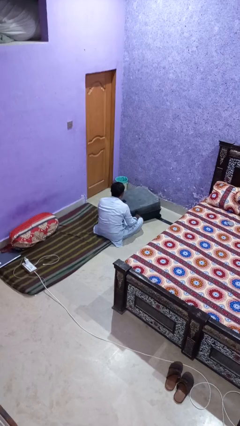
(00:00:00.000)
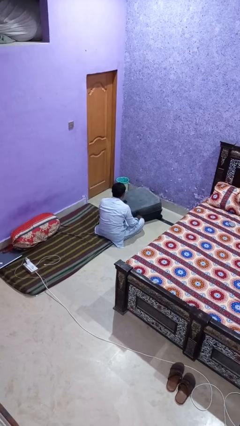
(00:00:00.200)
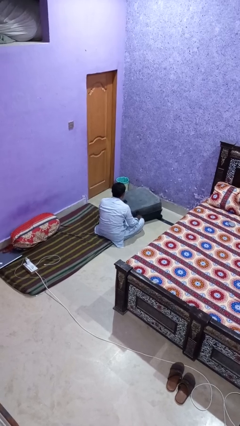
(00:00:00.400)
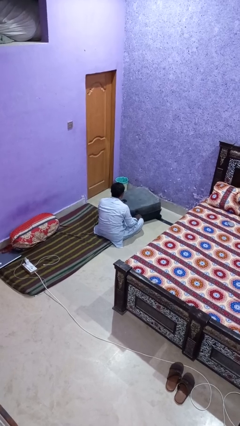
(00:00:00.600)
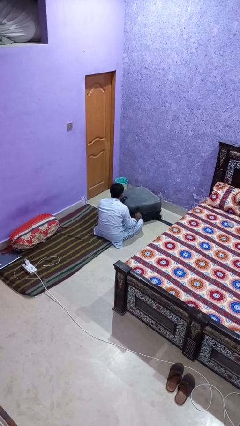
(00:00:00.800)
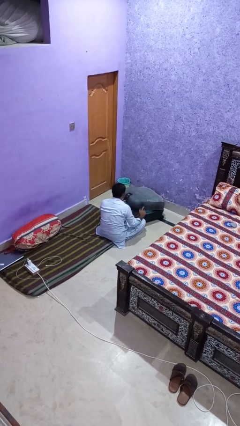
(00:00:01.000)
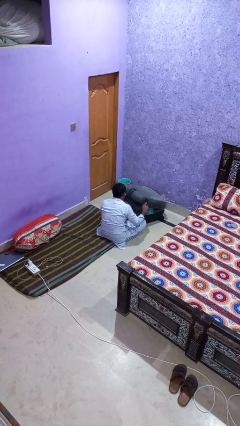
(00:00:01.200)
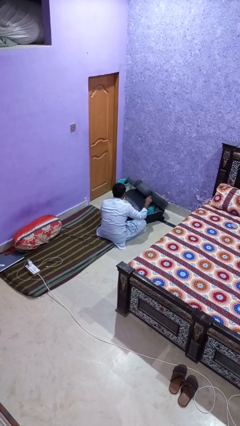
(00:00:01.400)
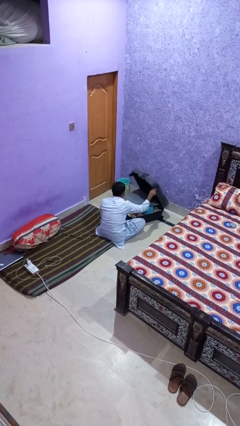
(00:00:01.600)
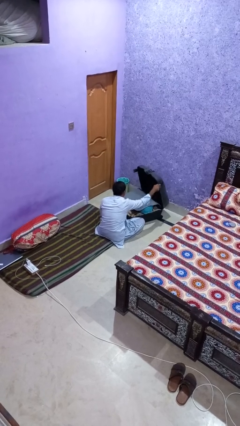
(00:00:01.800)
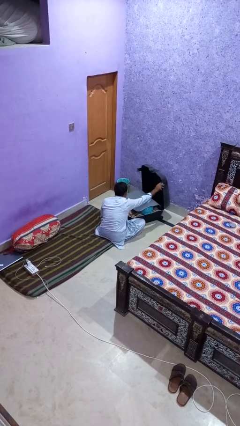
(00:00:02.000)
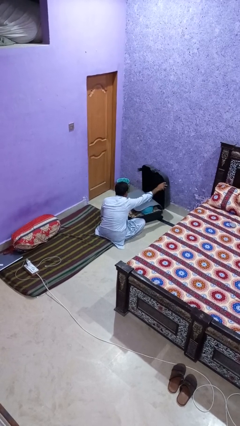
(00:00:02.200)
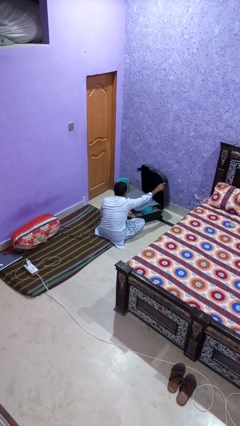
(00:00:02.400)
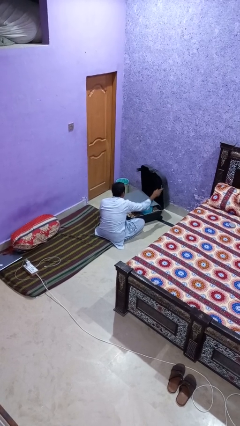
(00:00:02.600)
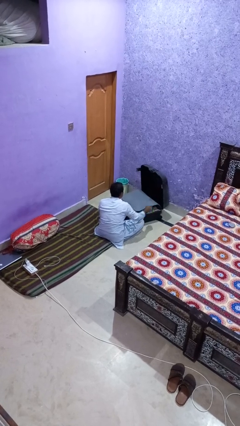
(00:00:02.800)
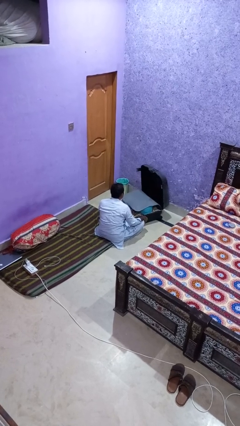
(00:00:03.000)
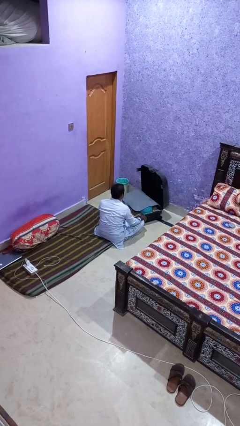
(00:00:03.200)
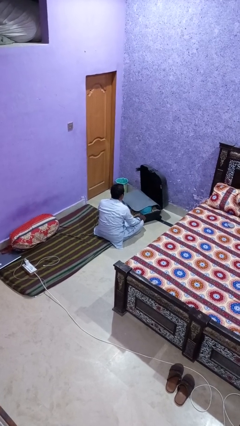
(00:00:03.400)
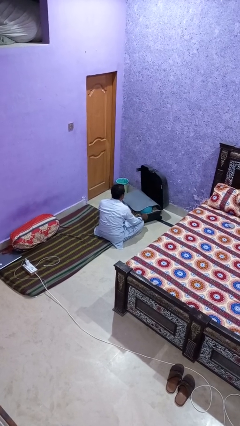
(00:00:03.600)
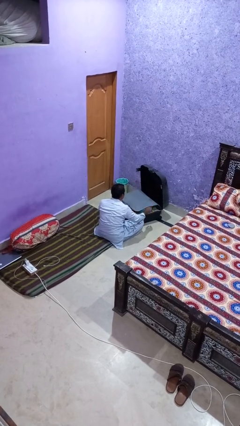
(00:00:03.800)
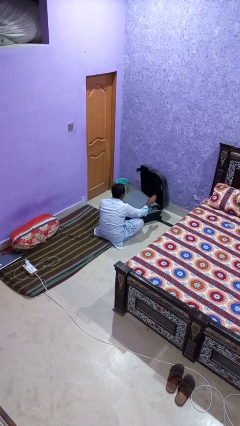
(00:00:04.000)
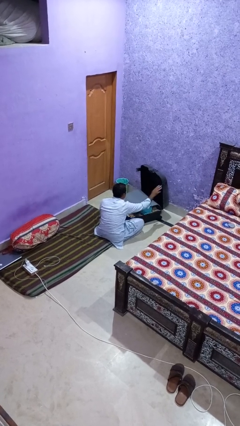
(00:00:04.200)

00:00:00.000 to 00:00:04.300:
person opens suitcase

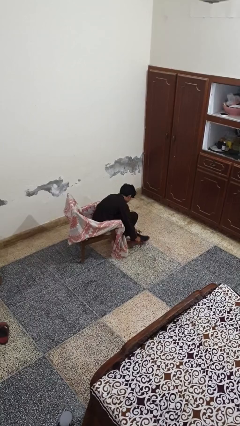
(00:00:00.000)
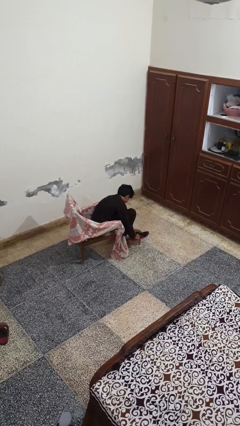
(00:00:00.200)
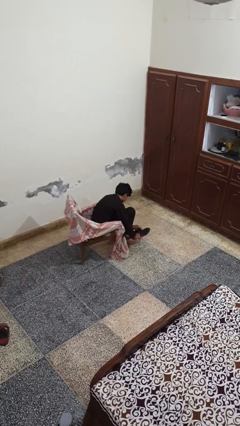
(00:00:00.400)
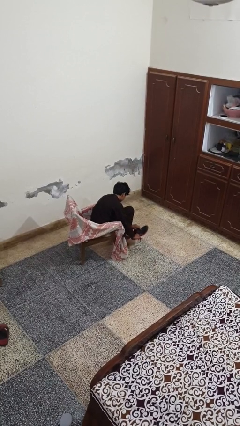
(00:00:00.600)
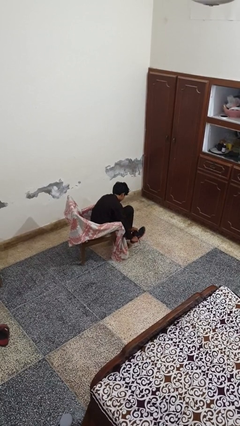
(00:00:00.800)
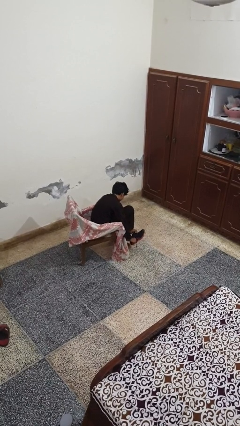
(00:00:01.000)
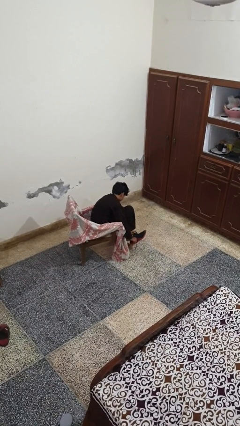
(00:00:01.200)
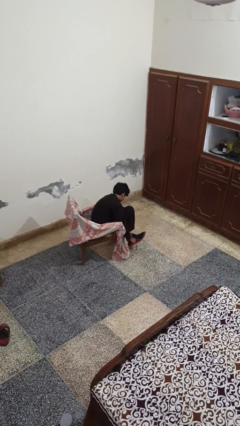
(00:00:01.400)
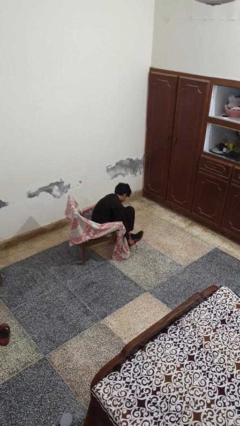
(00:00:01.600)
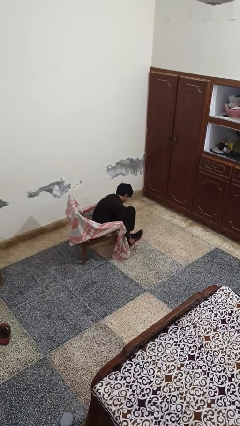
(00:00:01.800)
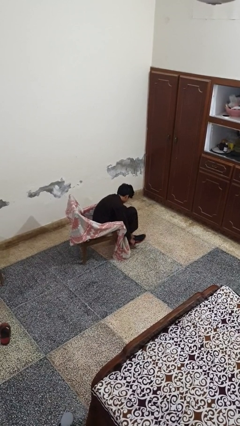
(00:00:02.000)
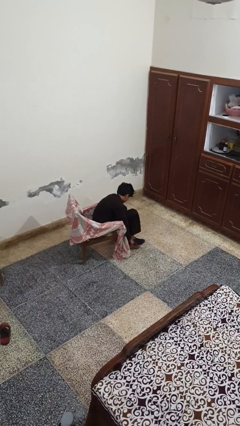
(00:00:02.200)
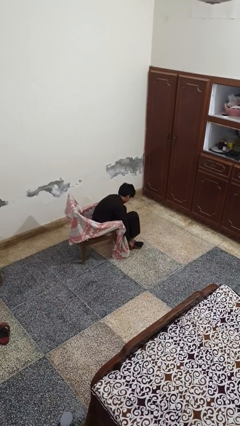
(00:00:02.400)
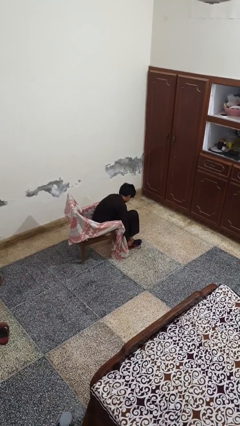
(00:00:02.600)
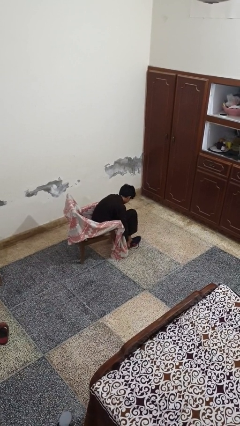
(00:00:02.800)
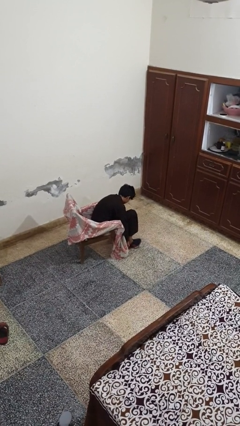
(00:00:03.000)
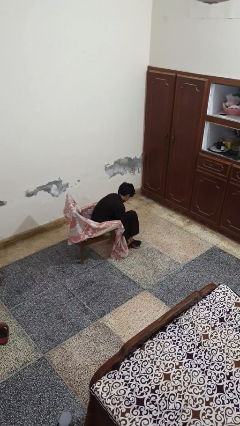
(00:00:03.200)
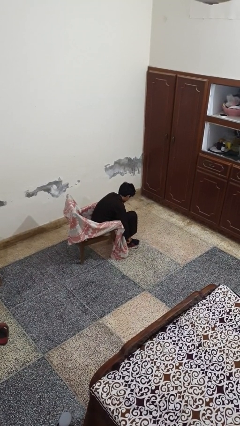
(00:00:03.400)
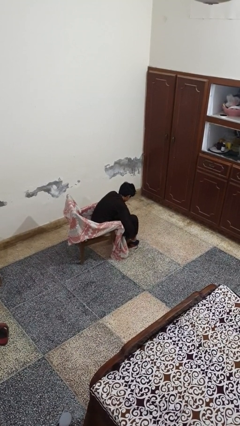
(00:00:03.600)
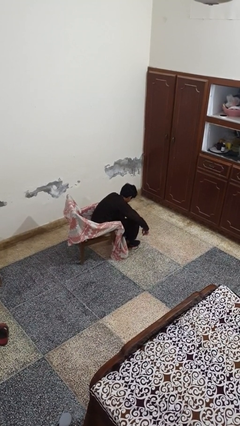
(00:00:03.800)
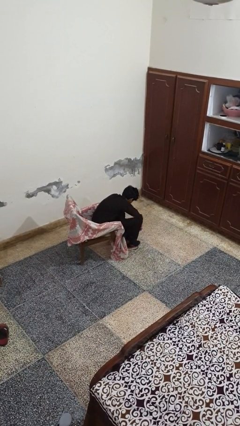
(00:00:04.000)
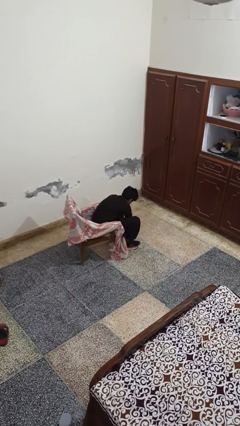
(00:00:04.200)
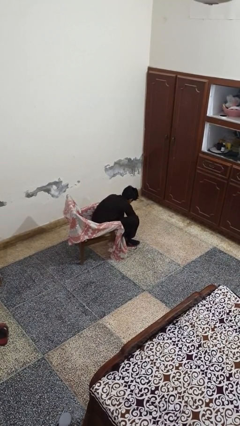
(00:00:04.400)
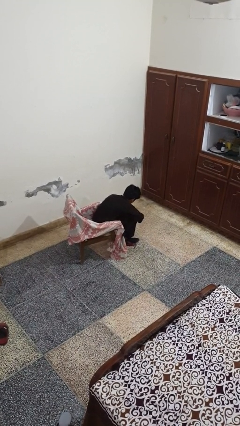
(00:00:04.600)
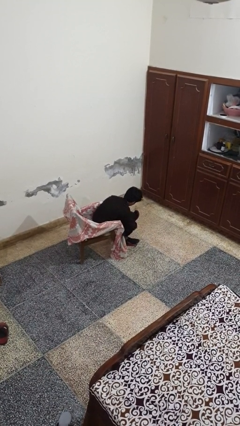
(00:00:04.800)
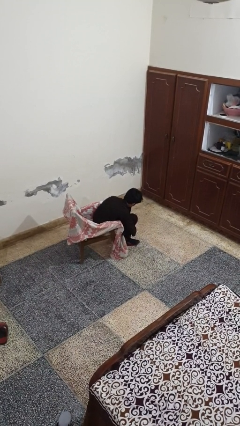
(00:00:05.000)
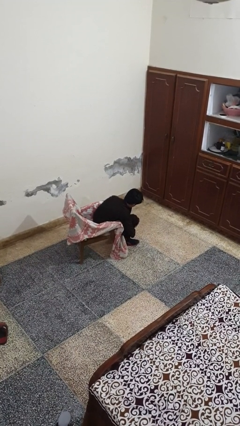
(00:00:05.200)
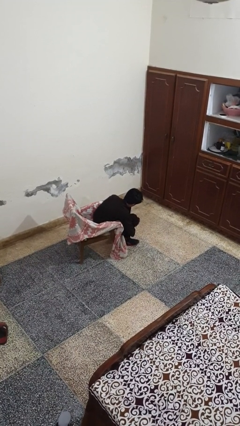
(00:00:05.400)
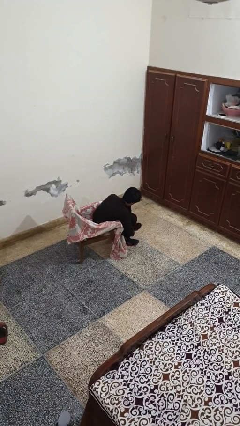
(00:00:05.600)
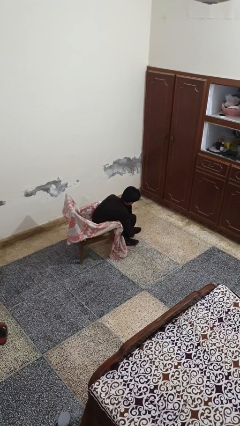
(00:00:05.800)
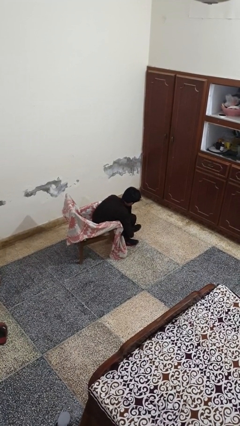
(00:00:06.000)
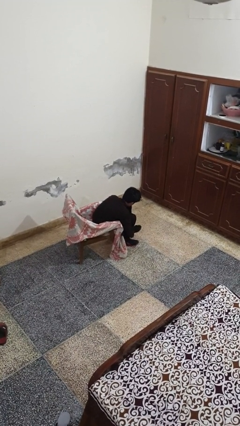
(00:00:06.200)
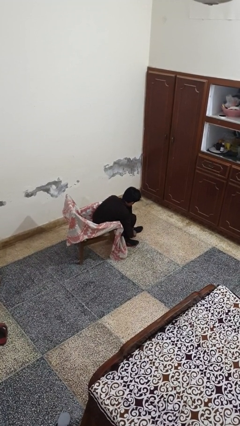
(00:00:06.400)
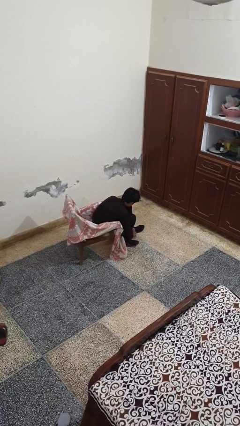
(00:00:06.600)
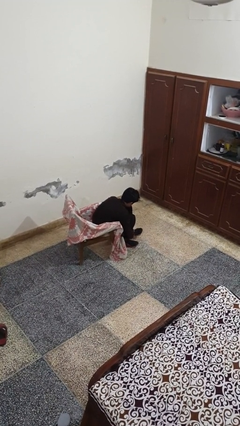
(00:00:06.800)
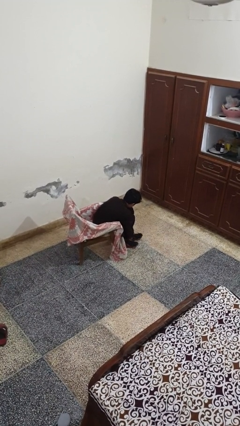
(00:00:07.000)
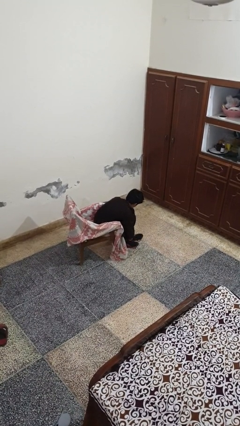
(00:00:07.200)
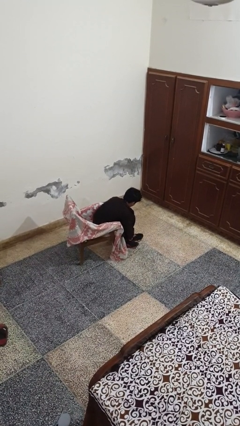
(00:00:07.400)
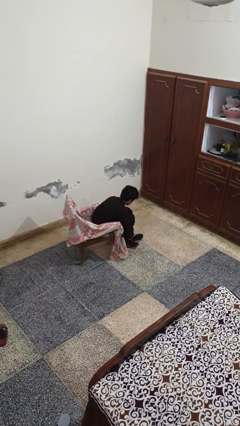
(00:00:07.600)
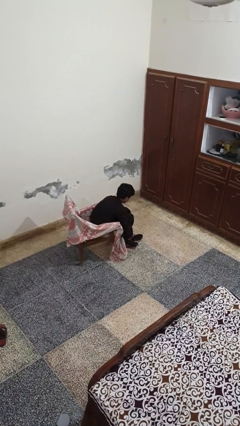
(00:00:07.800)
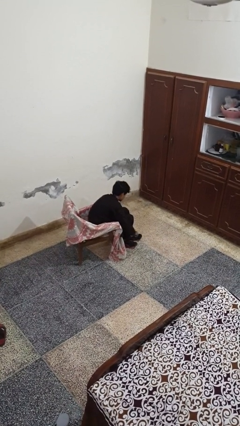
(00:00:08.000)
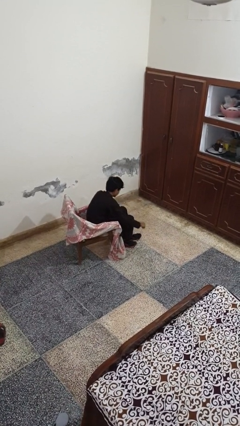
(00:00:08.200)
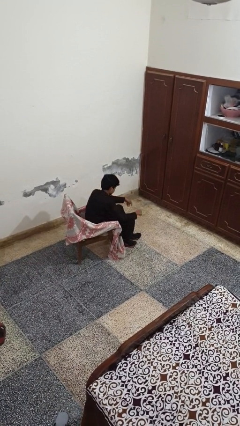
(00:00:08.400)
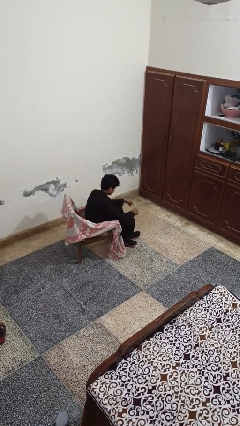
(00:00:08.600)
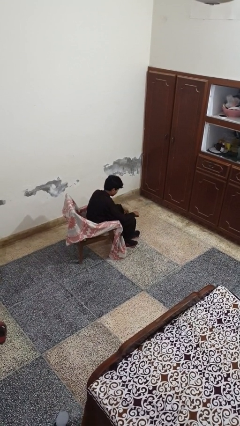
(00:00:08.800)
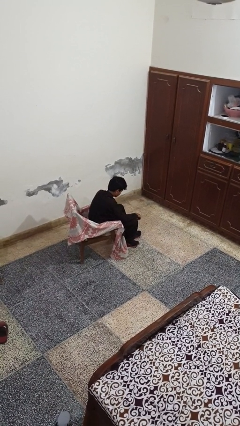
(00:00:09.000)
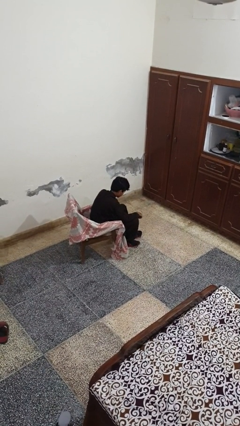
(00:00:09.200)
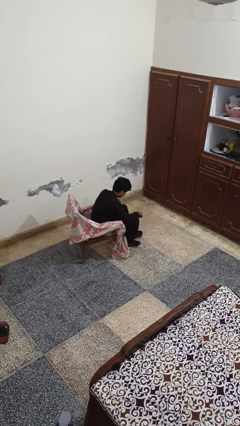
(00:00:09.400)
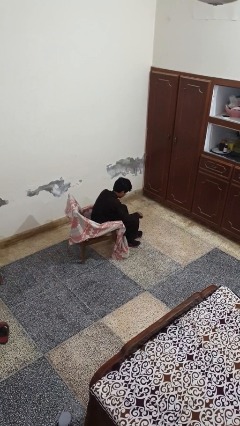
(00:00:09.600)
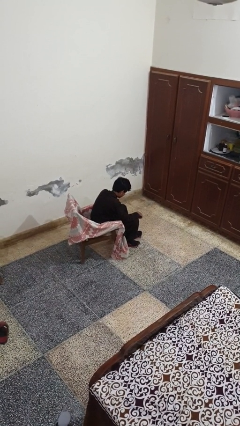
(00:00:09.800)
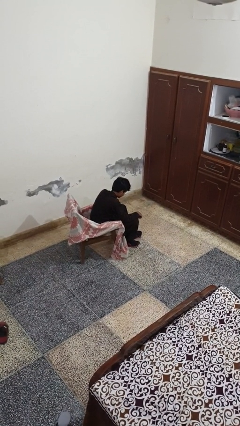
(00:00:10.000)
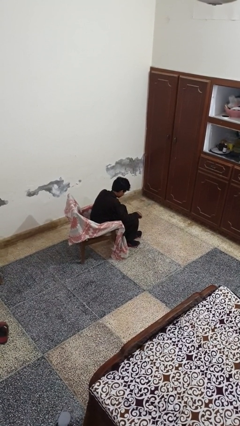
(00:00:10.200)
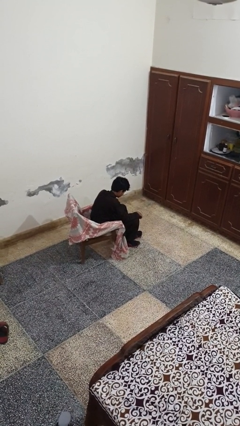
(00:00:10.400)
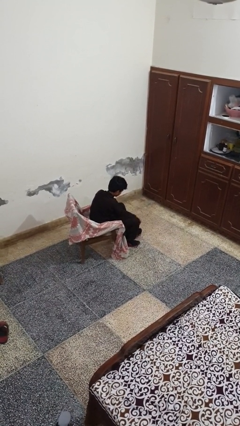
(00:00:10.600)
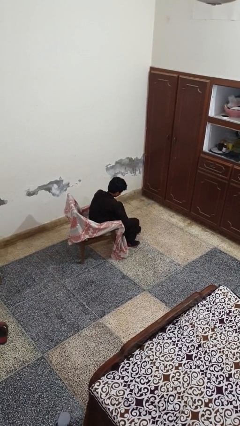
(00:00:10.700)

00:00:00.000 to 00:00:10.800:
person puts on shoes

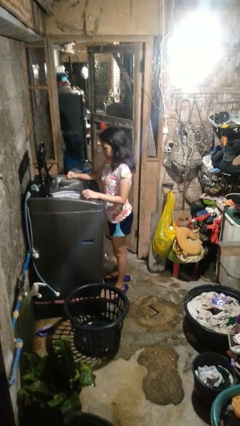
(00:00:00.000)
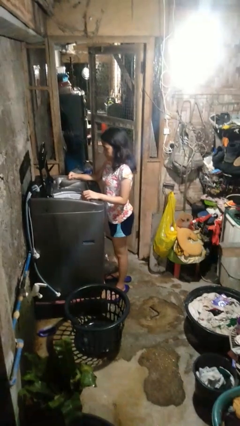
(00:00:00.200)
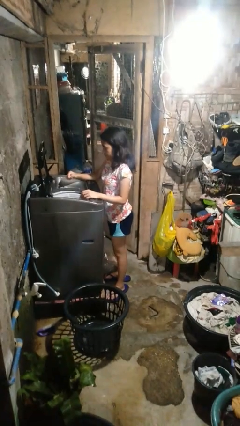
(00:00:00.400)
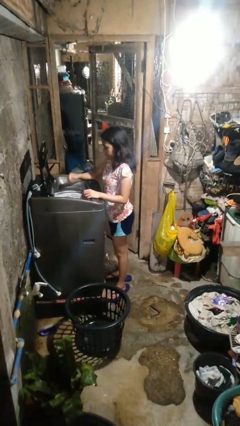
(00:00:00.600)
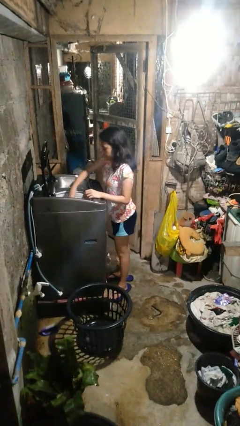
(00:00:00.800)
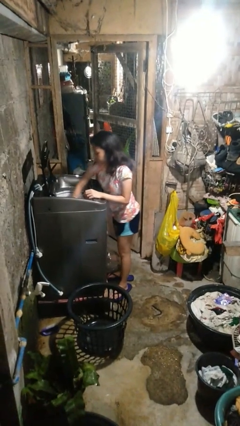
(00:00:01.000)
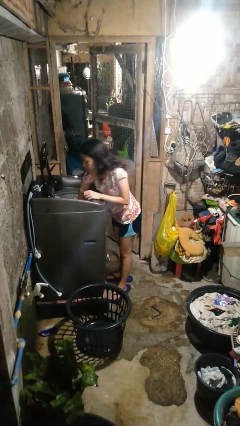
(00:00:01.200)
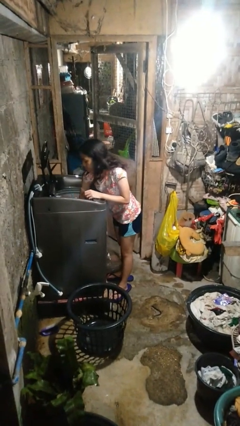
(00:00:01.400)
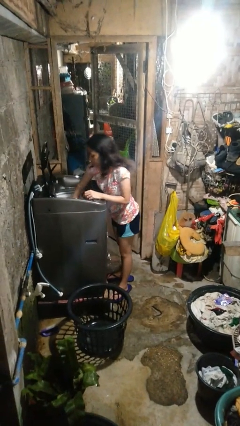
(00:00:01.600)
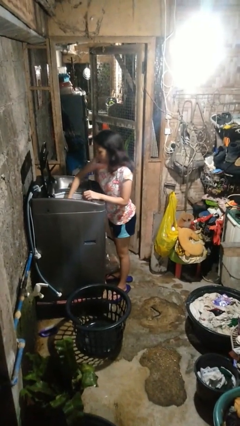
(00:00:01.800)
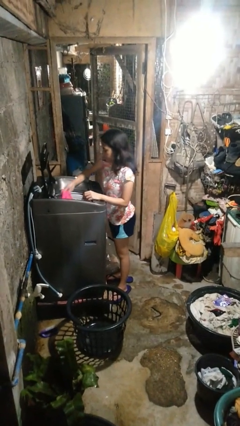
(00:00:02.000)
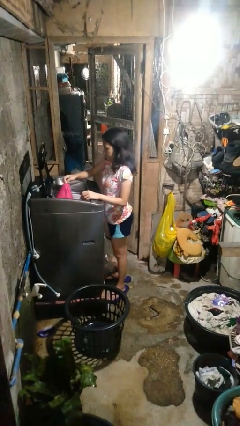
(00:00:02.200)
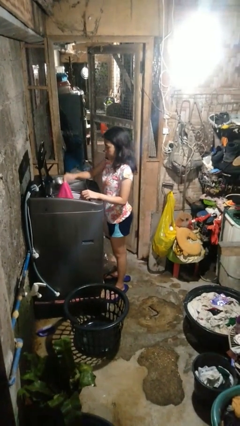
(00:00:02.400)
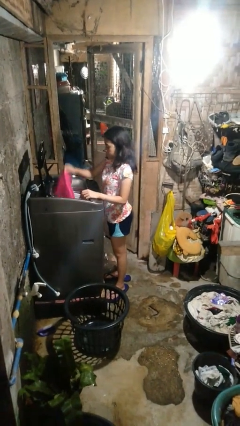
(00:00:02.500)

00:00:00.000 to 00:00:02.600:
person unloads clotheswasher

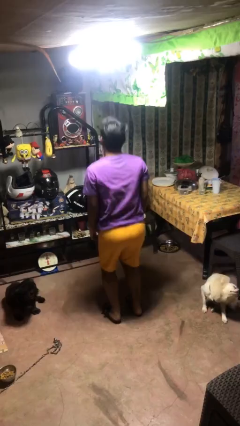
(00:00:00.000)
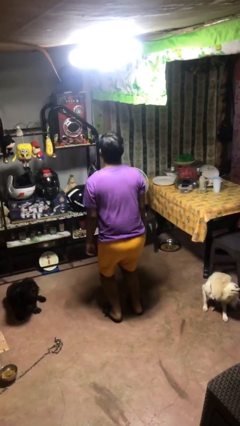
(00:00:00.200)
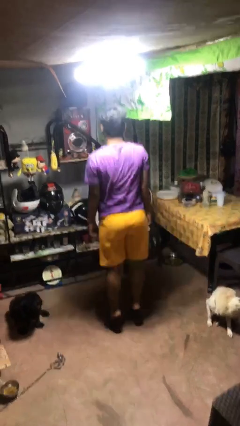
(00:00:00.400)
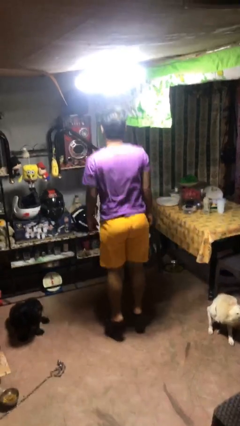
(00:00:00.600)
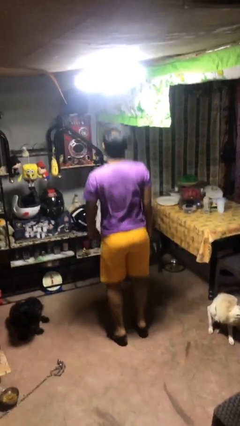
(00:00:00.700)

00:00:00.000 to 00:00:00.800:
person jumps
